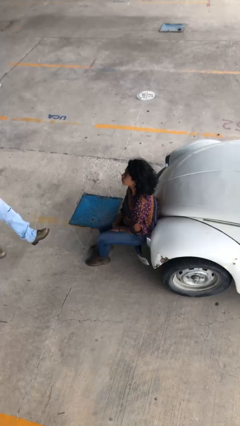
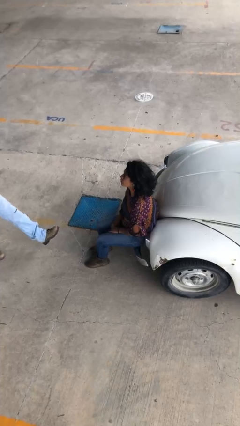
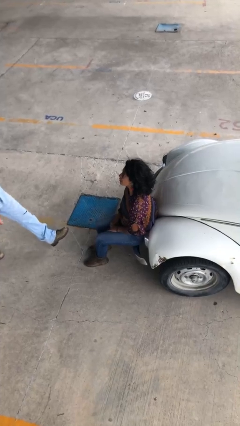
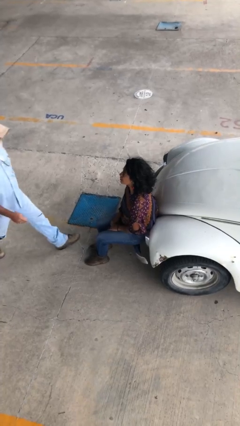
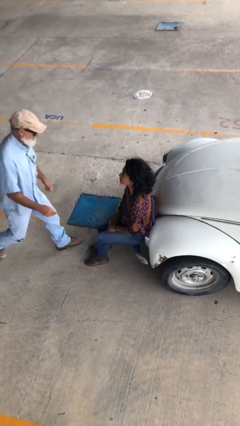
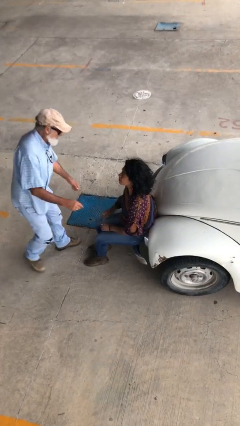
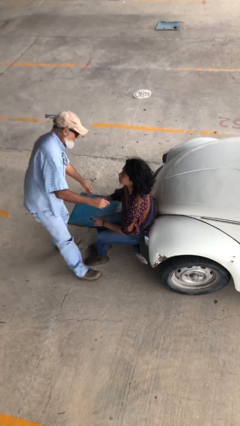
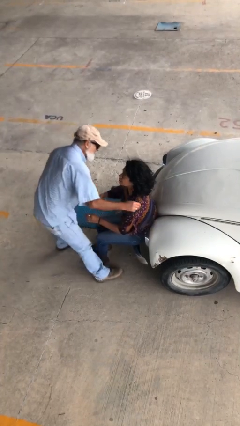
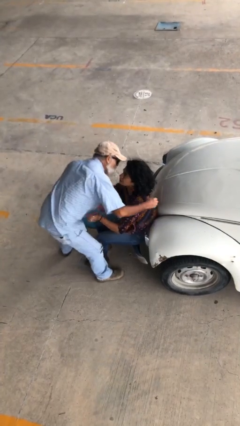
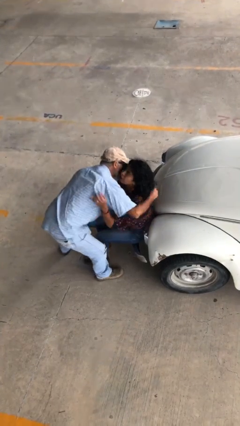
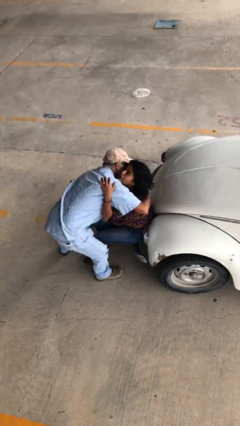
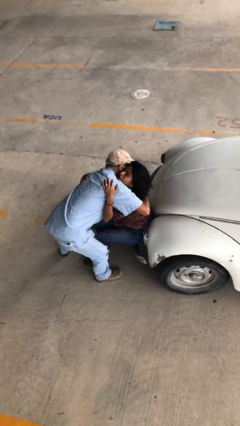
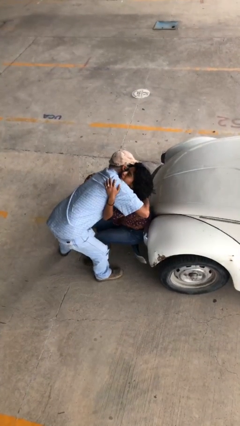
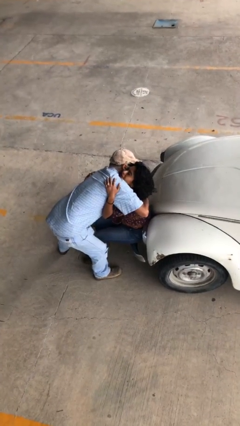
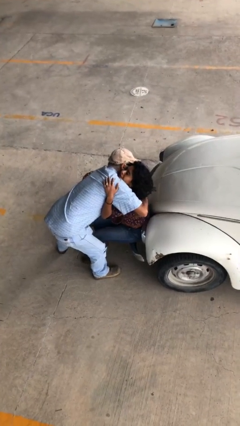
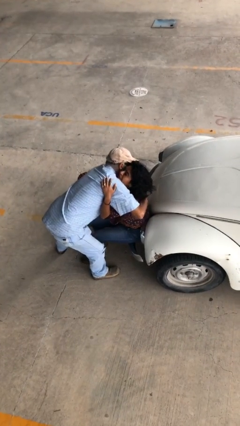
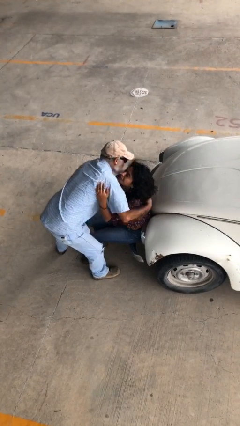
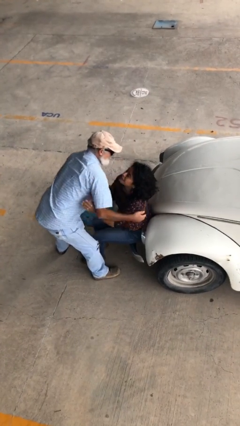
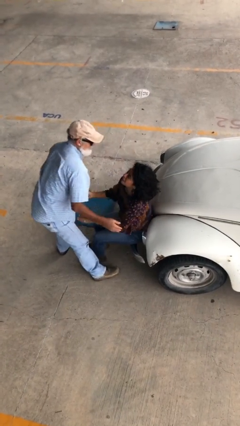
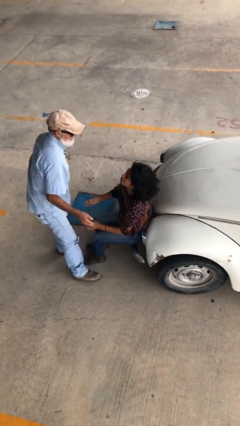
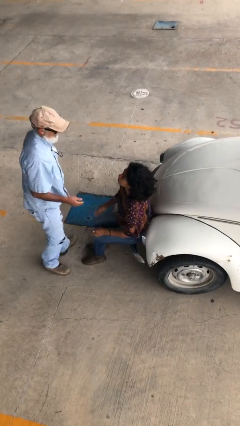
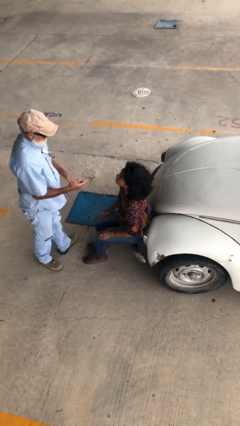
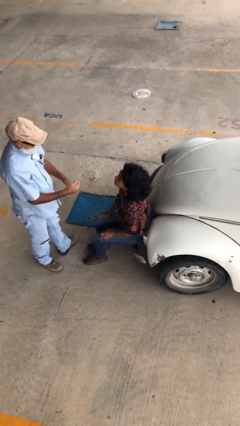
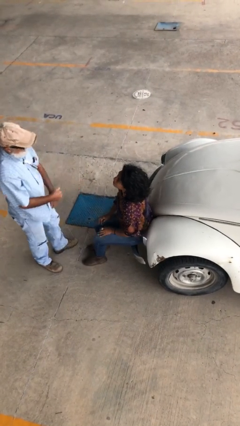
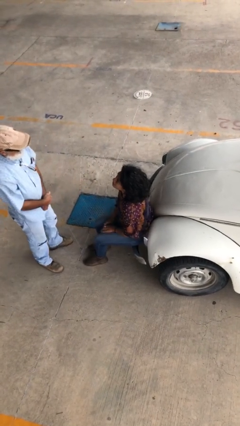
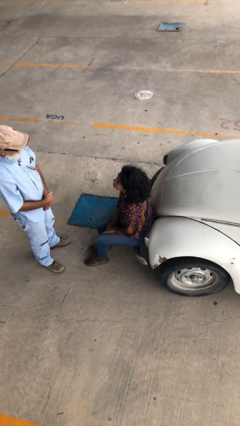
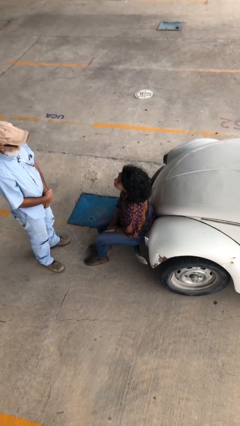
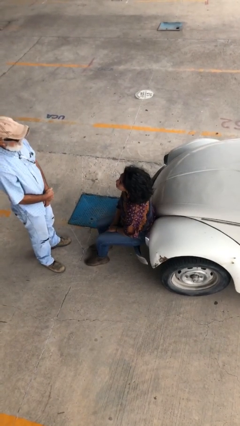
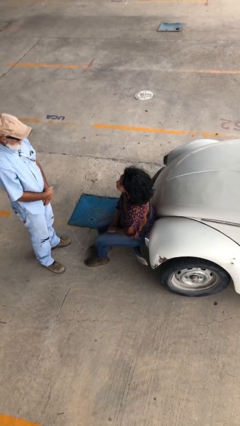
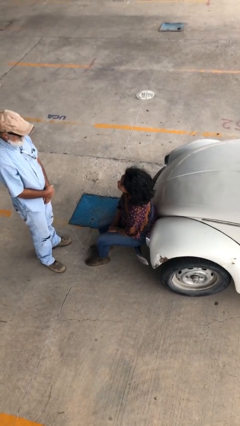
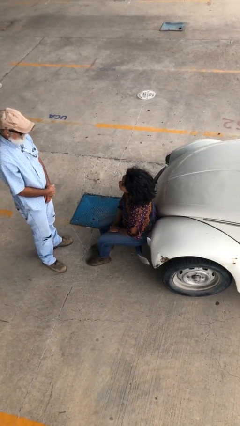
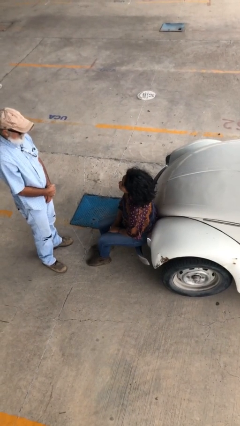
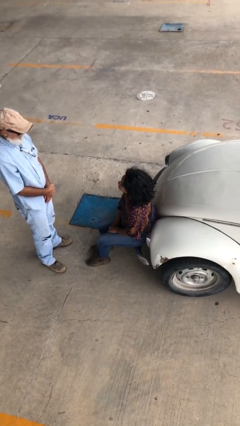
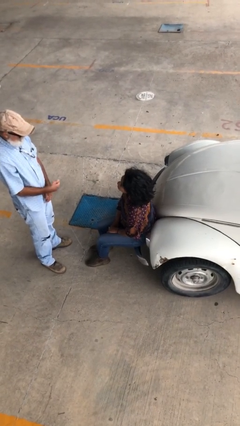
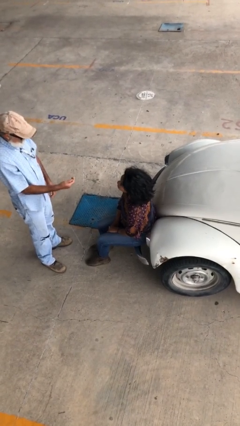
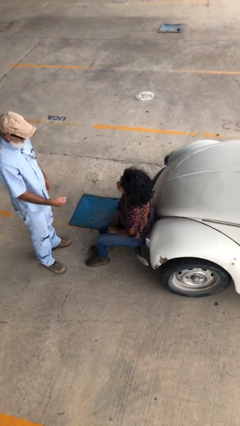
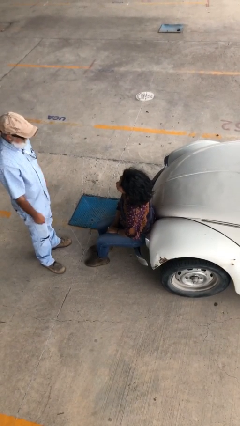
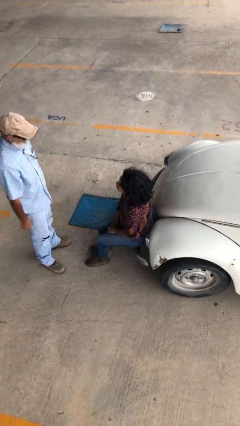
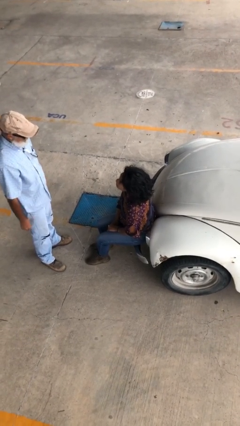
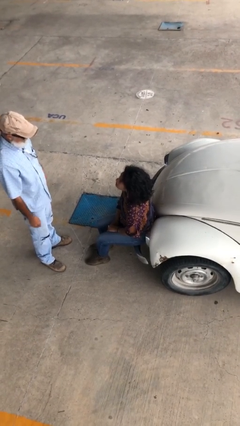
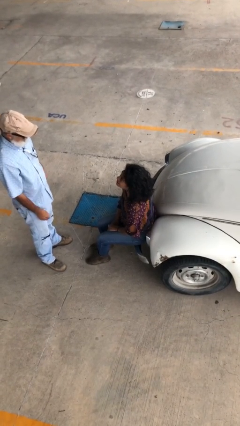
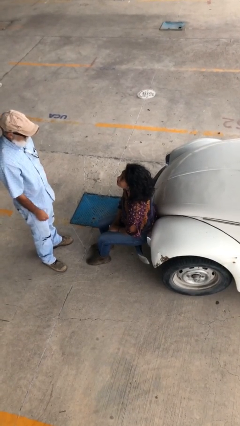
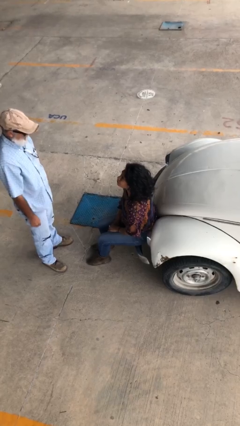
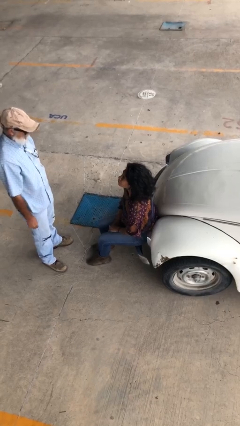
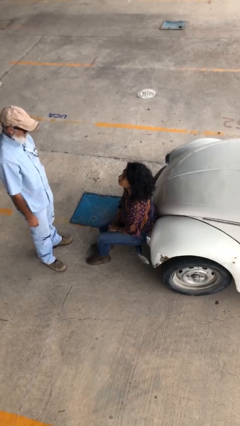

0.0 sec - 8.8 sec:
person embraces person

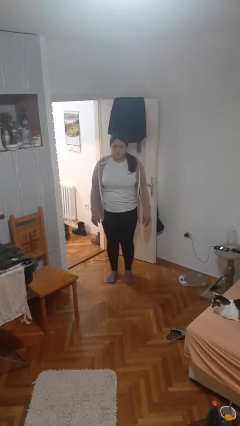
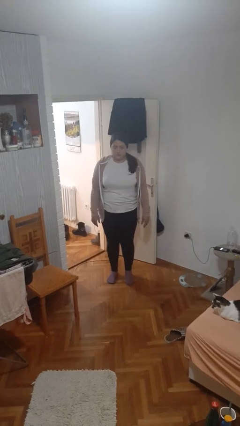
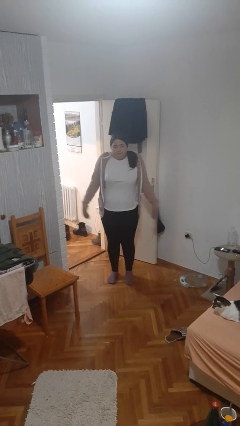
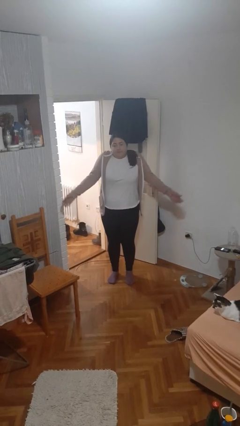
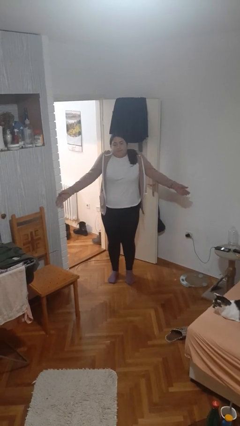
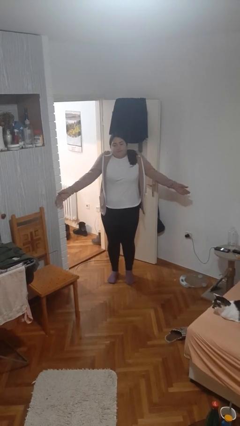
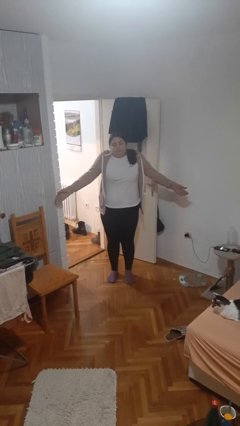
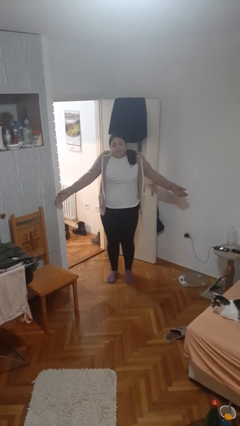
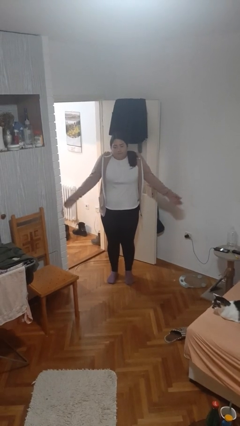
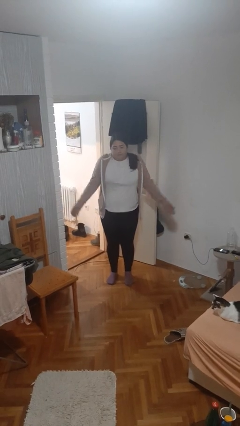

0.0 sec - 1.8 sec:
person shrugs

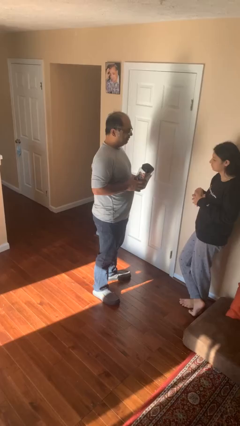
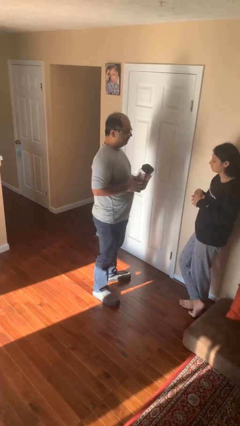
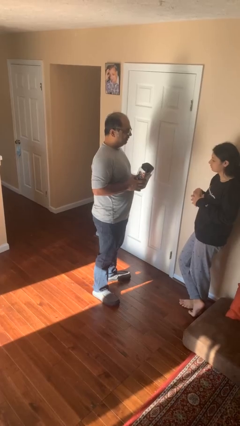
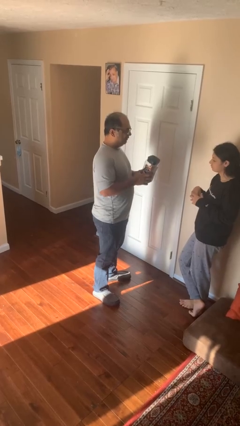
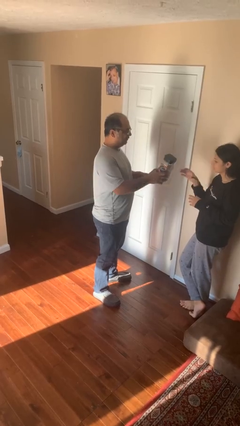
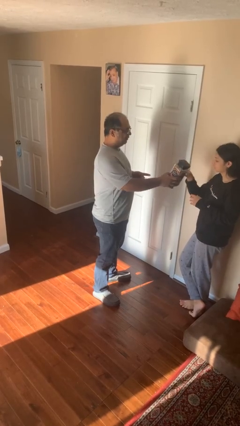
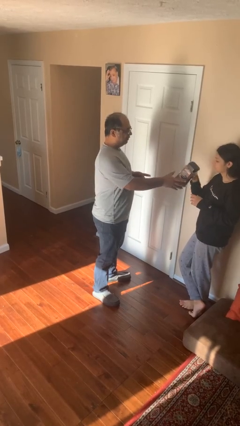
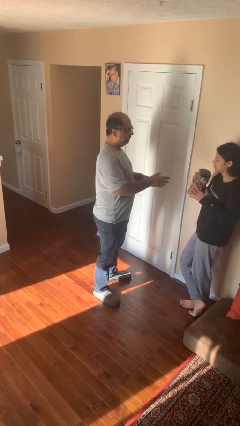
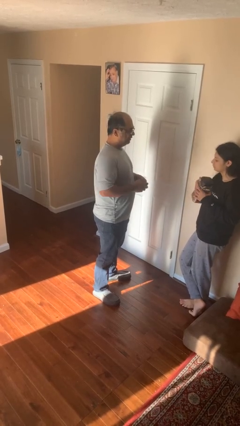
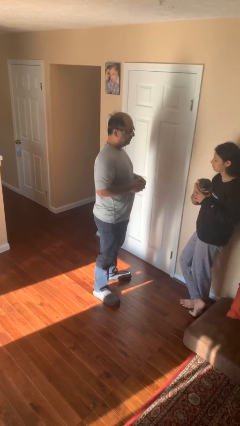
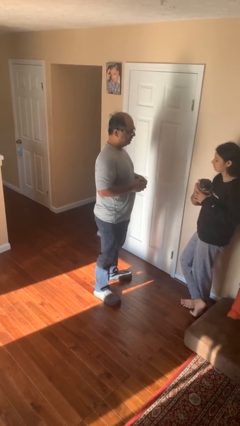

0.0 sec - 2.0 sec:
person transfers object to person

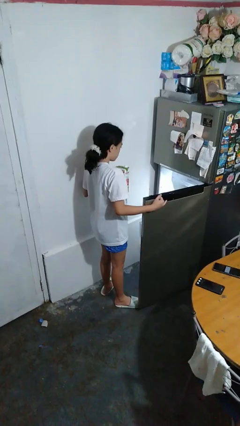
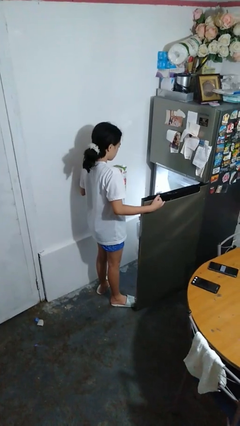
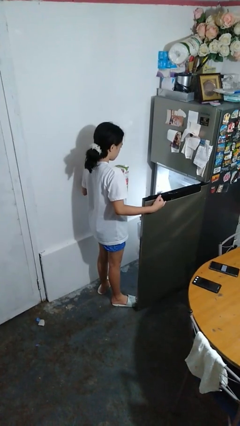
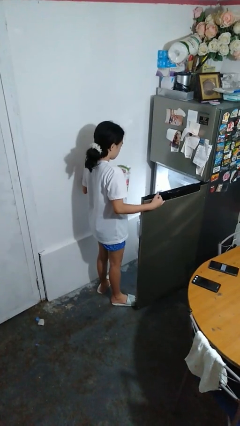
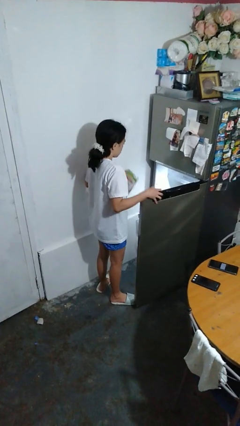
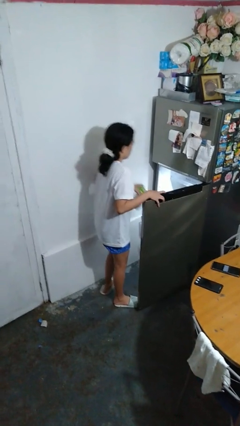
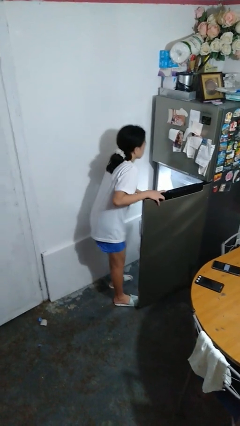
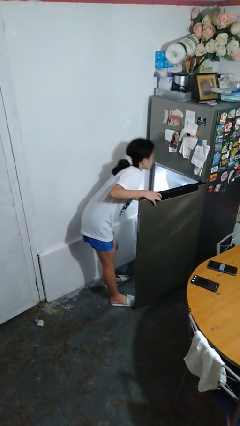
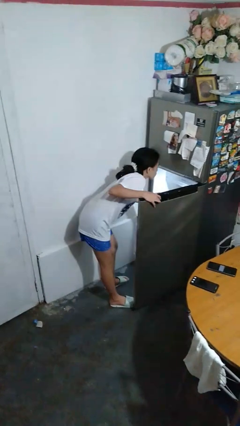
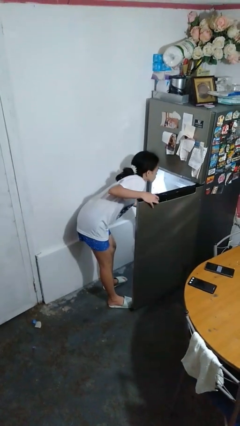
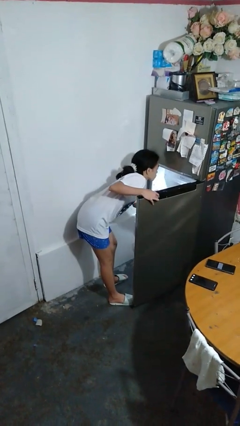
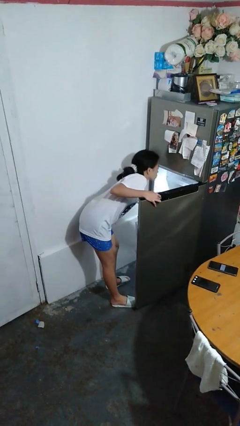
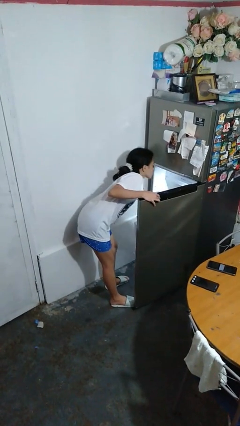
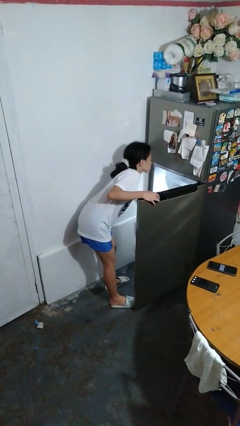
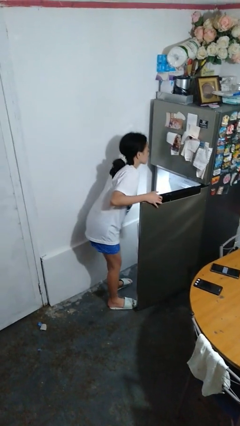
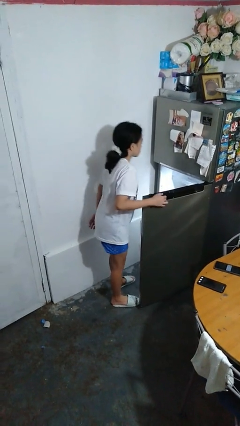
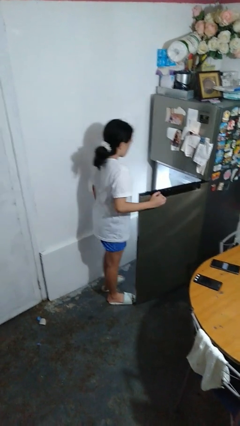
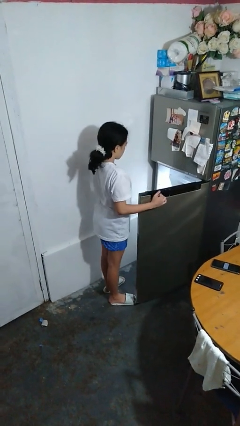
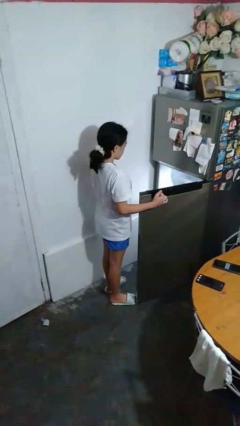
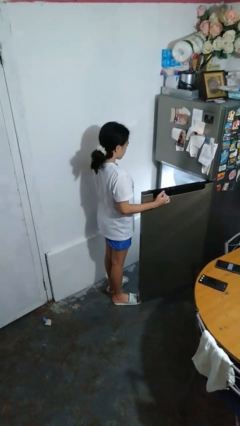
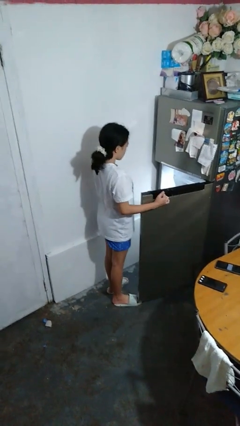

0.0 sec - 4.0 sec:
person puts object into refrigerator

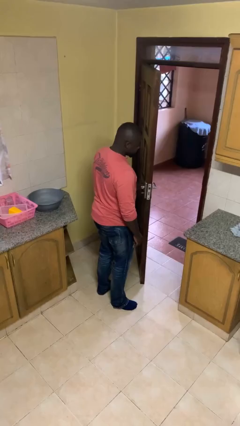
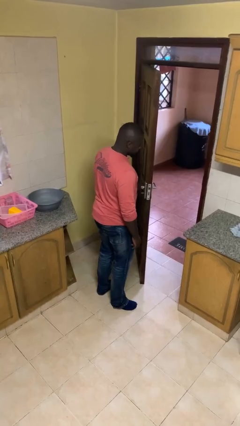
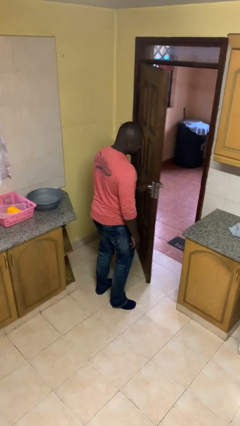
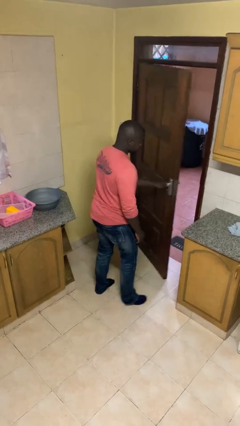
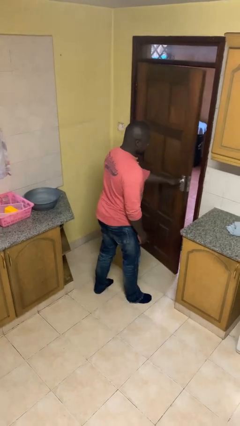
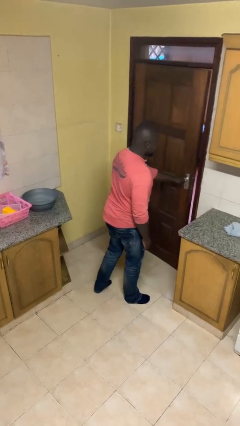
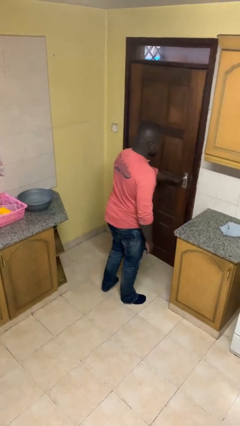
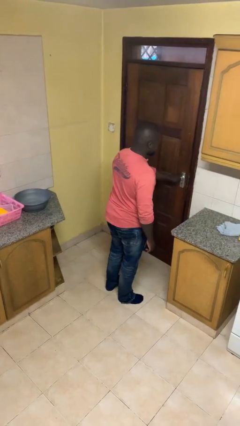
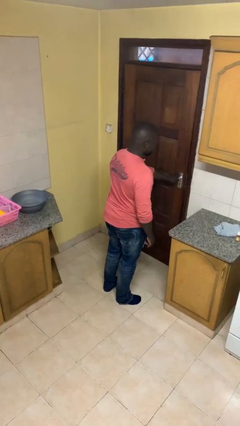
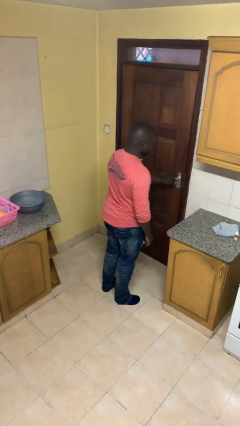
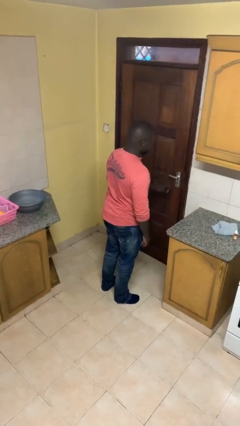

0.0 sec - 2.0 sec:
person closes facility door
